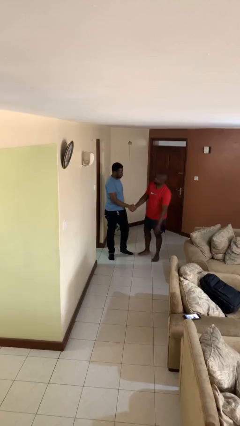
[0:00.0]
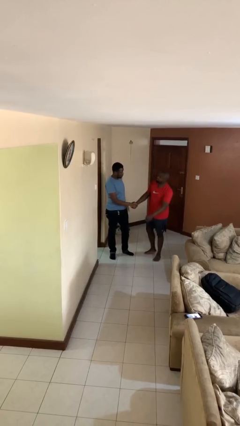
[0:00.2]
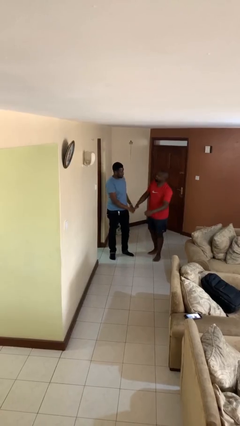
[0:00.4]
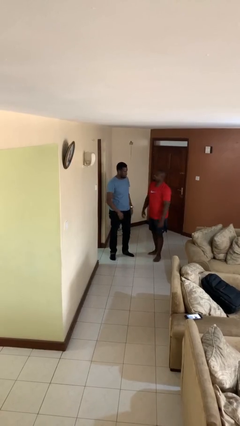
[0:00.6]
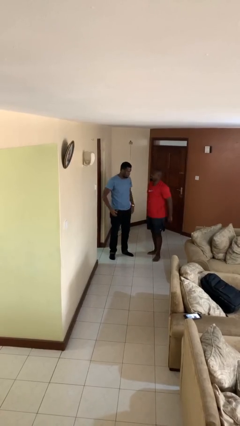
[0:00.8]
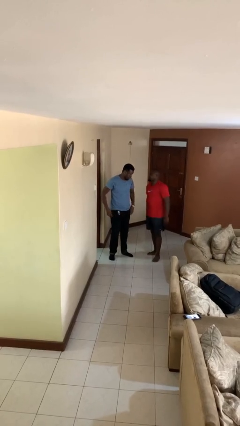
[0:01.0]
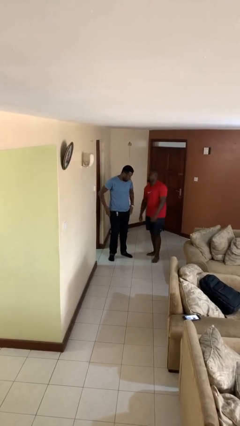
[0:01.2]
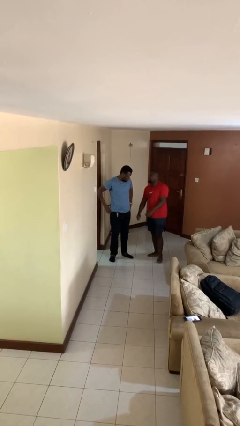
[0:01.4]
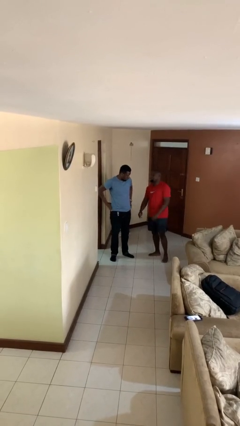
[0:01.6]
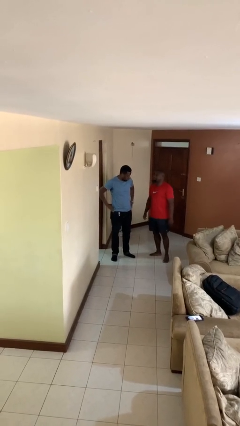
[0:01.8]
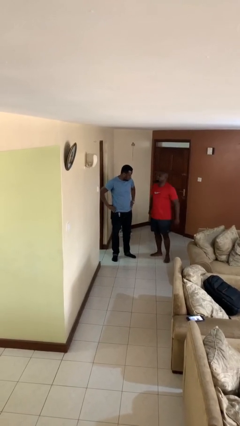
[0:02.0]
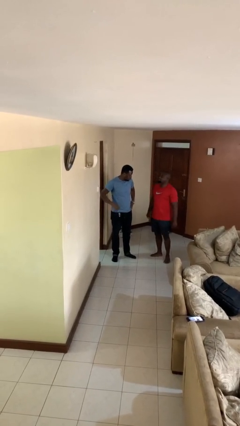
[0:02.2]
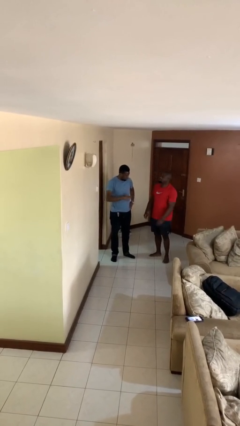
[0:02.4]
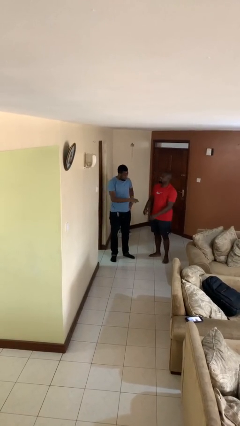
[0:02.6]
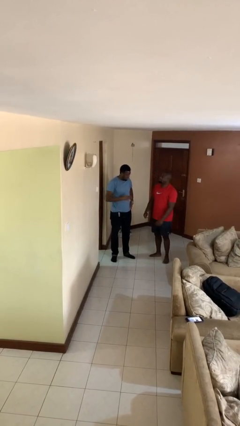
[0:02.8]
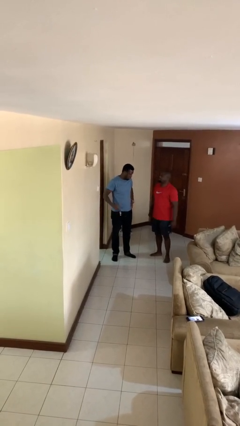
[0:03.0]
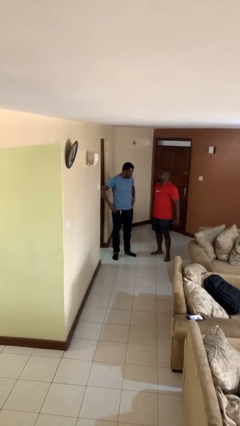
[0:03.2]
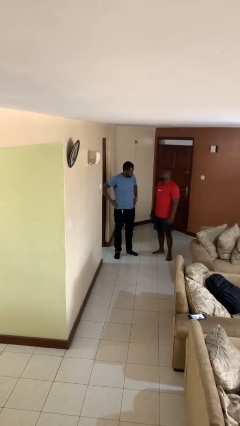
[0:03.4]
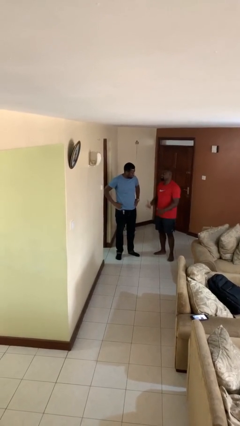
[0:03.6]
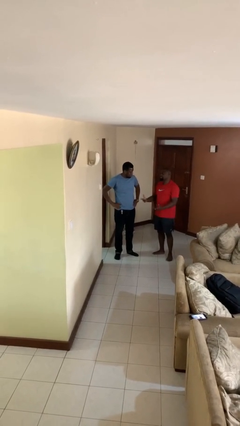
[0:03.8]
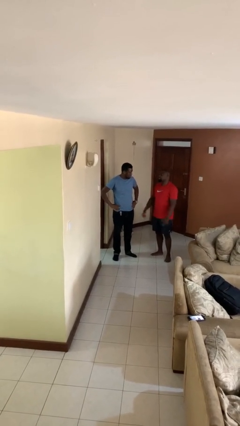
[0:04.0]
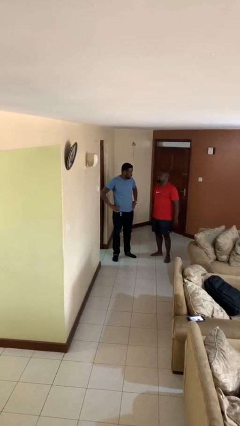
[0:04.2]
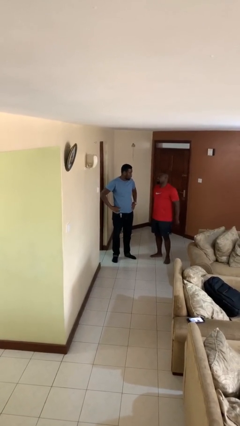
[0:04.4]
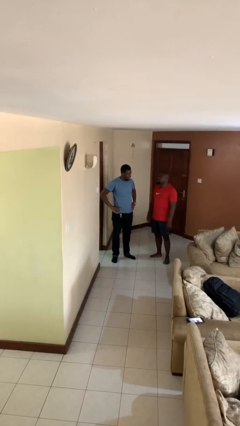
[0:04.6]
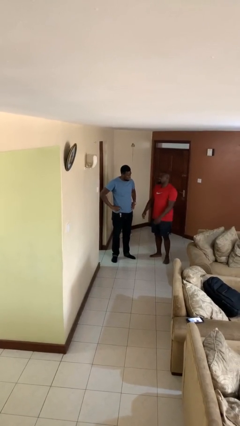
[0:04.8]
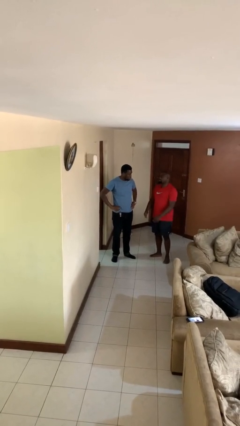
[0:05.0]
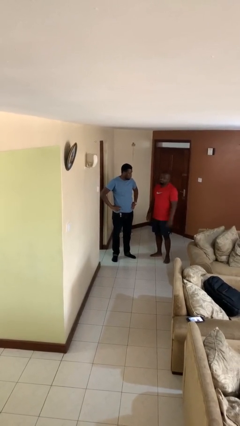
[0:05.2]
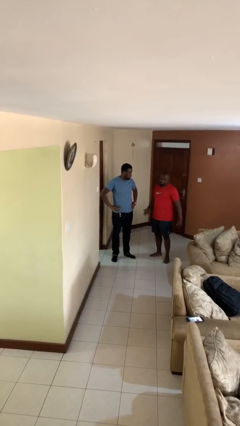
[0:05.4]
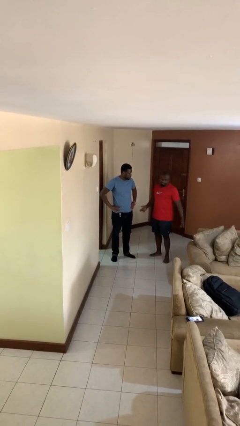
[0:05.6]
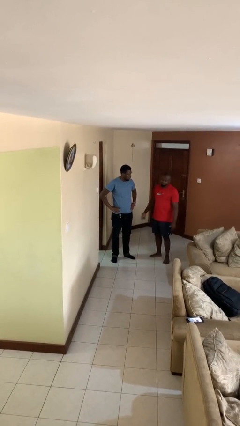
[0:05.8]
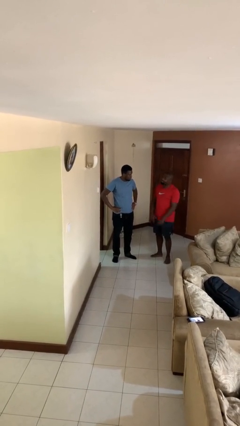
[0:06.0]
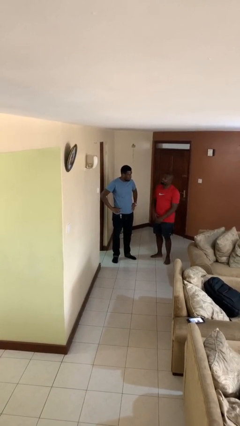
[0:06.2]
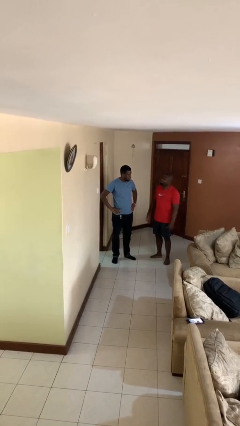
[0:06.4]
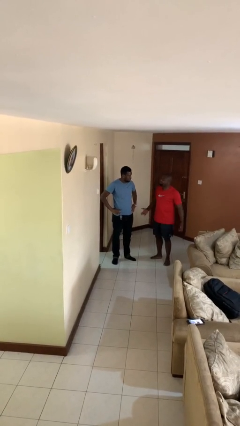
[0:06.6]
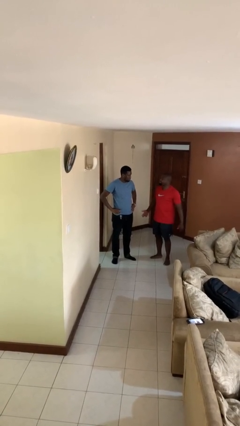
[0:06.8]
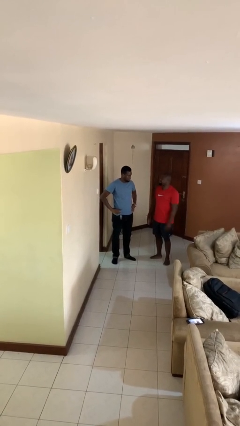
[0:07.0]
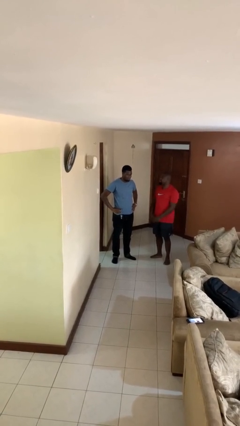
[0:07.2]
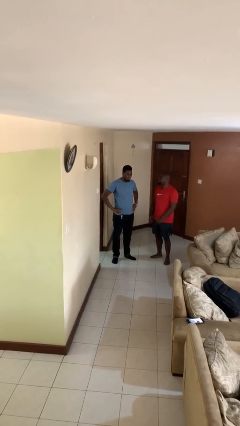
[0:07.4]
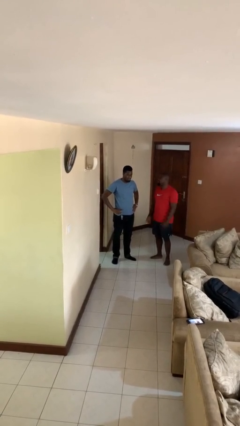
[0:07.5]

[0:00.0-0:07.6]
person talks to person

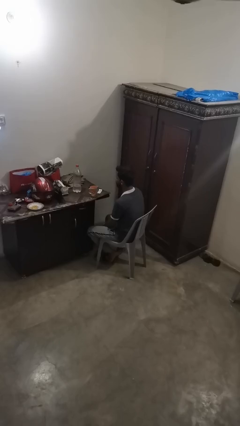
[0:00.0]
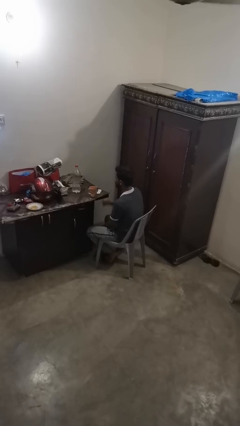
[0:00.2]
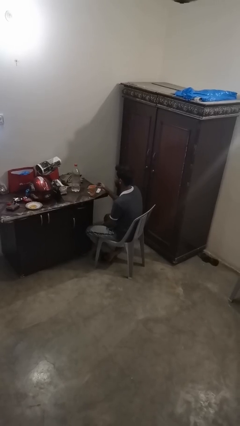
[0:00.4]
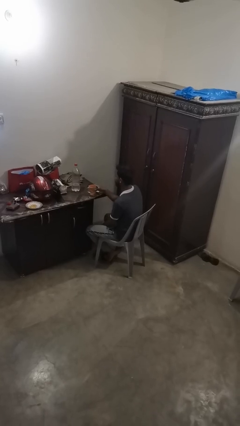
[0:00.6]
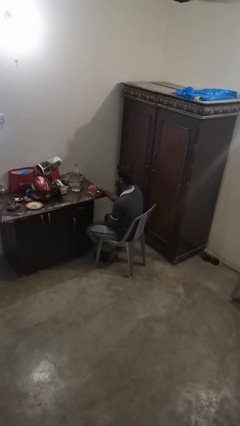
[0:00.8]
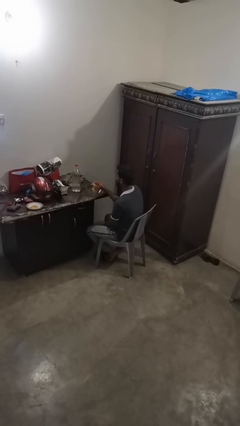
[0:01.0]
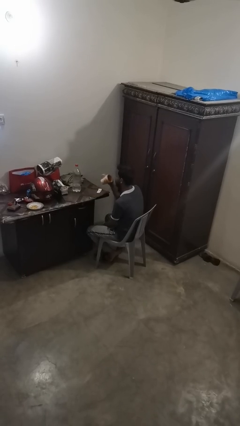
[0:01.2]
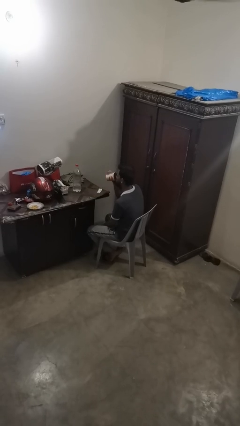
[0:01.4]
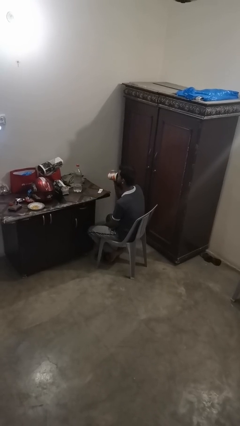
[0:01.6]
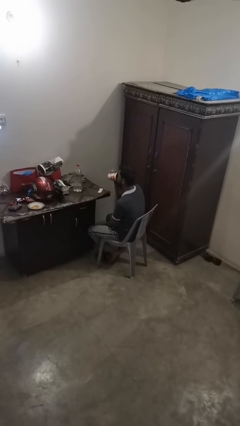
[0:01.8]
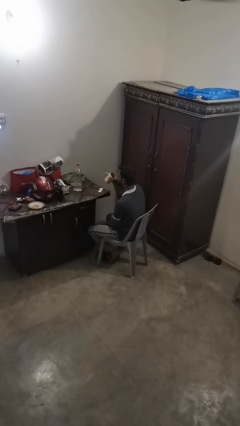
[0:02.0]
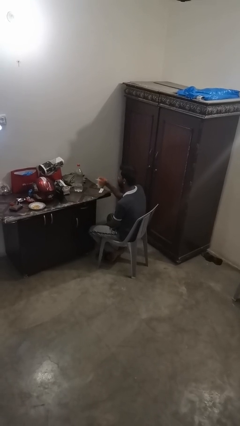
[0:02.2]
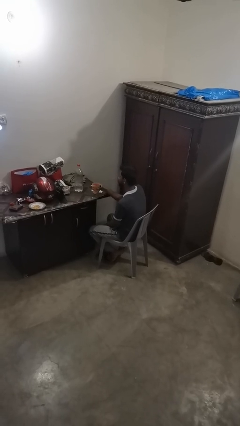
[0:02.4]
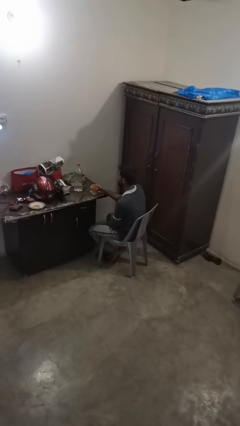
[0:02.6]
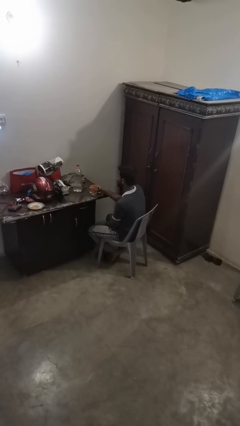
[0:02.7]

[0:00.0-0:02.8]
person drinks from cup

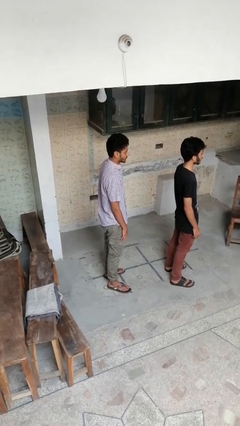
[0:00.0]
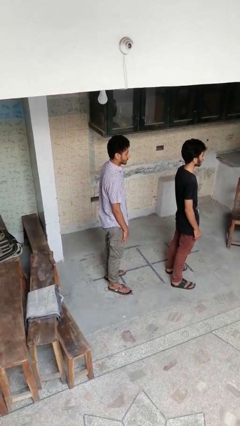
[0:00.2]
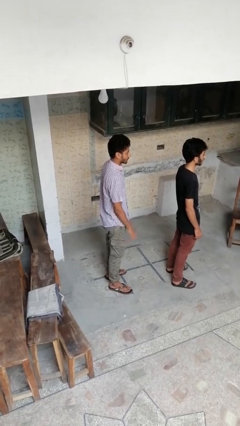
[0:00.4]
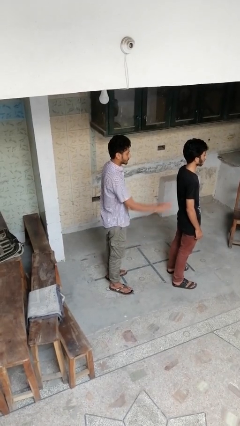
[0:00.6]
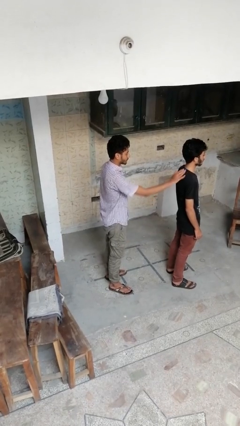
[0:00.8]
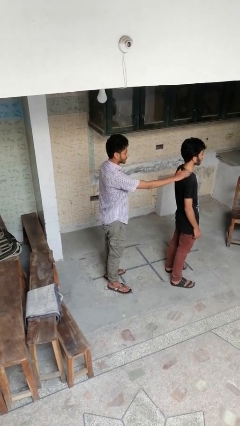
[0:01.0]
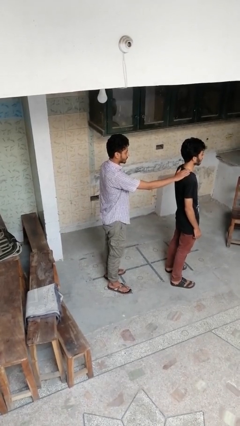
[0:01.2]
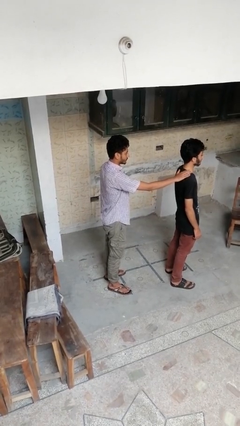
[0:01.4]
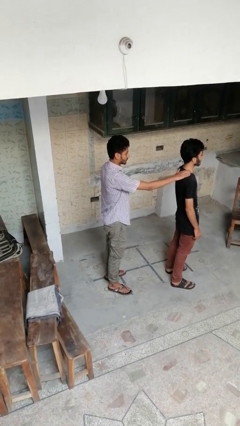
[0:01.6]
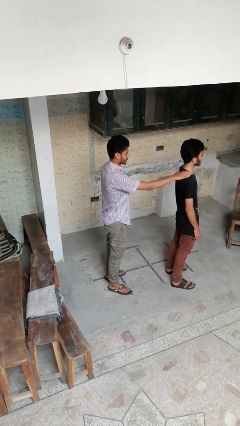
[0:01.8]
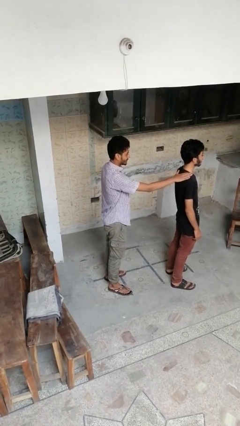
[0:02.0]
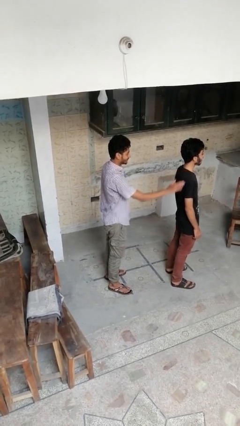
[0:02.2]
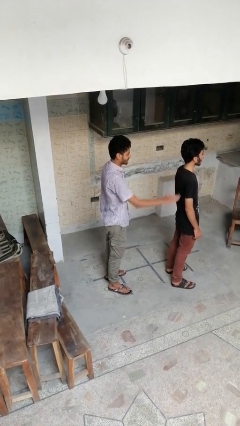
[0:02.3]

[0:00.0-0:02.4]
person touches back of person

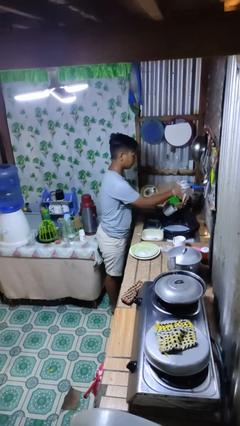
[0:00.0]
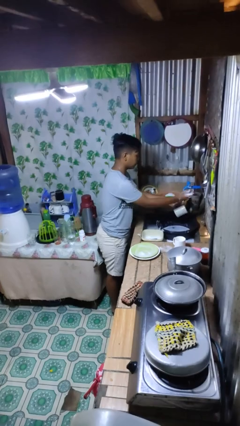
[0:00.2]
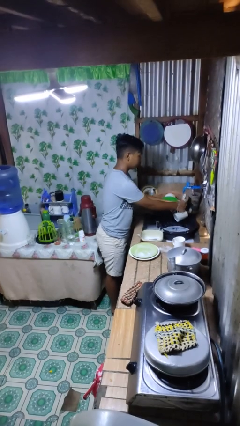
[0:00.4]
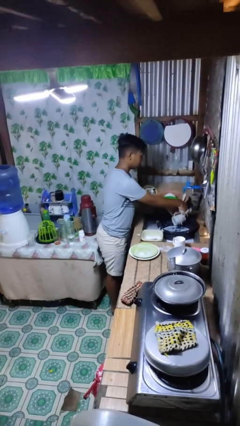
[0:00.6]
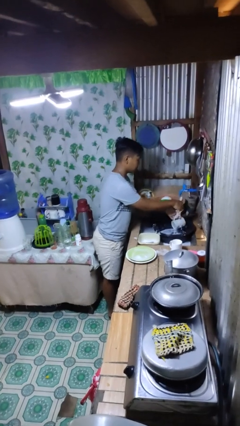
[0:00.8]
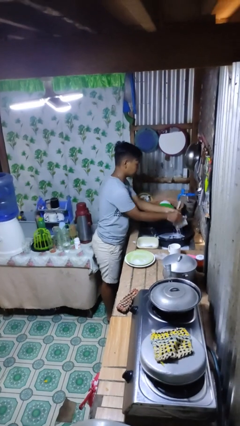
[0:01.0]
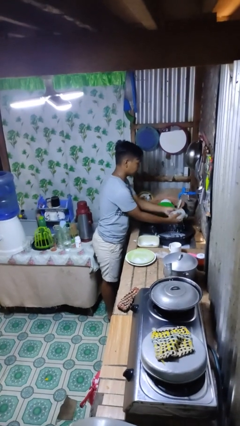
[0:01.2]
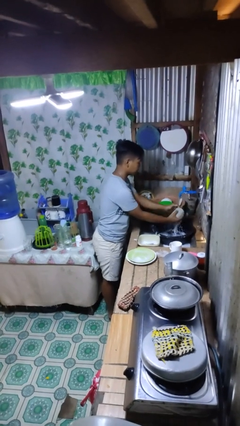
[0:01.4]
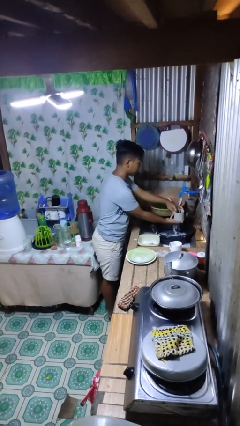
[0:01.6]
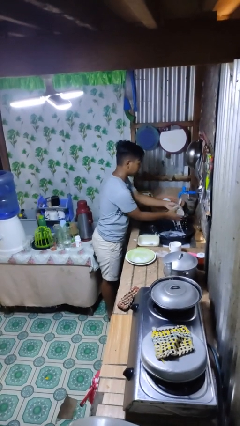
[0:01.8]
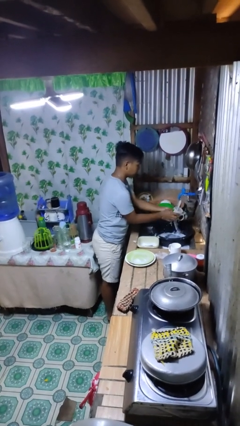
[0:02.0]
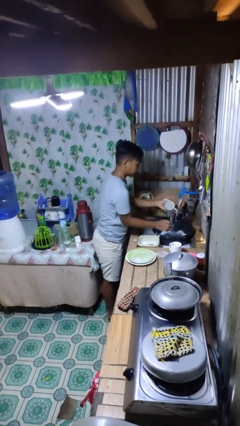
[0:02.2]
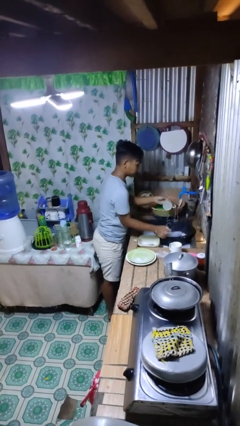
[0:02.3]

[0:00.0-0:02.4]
person washes dish

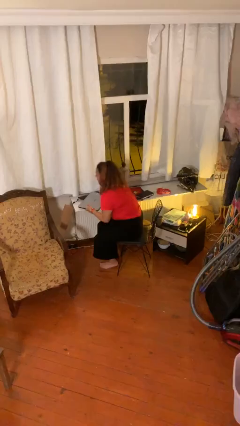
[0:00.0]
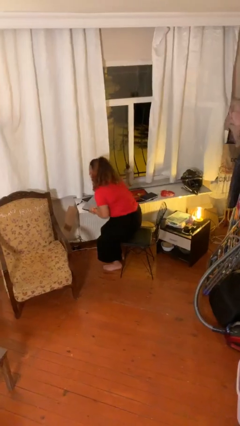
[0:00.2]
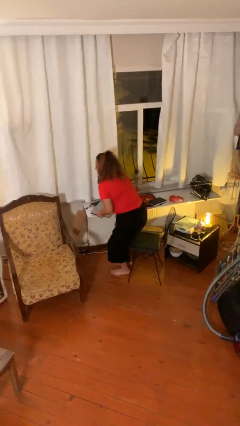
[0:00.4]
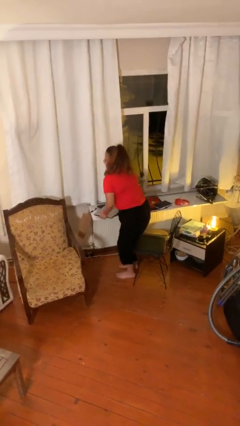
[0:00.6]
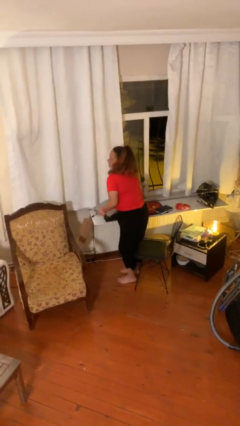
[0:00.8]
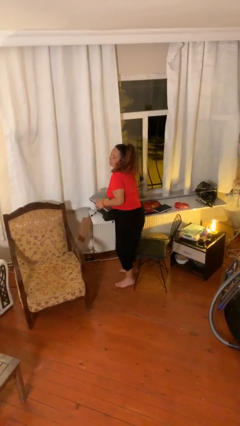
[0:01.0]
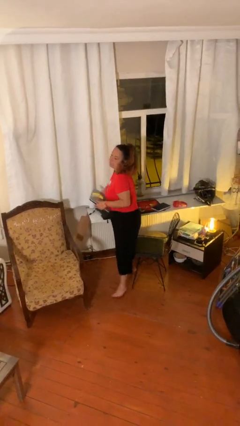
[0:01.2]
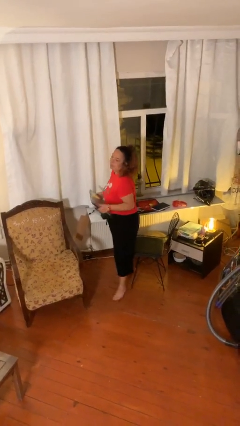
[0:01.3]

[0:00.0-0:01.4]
person stands up

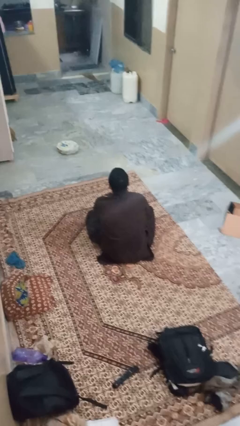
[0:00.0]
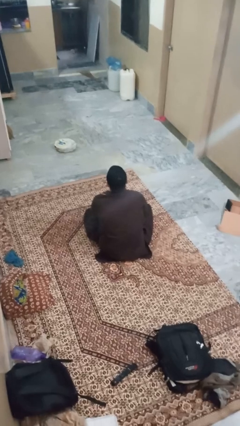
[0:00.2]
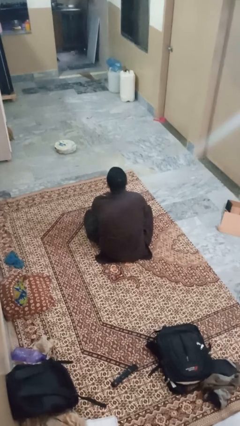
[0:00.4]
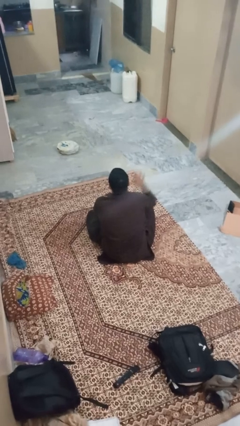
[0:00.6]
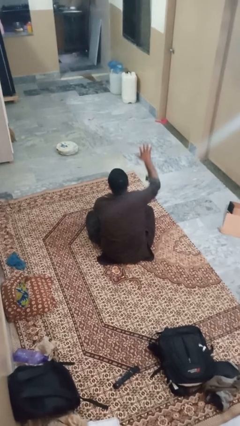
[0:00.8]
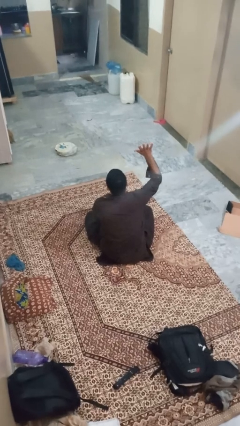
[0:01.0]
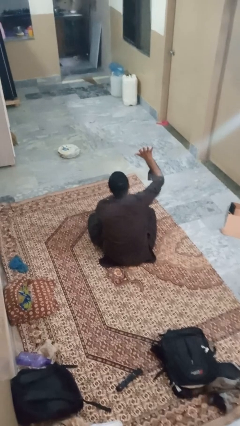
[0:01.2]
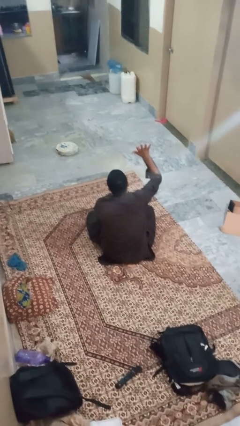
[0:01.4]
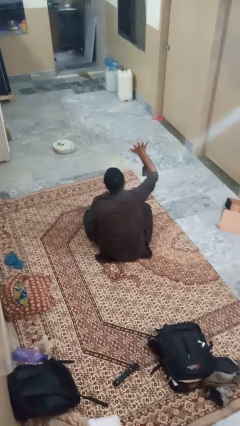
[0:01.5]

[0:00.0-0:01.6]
person gestures number five
